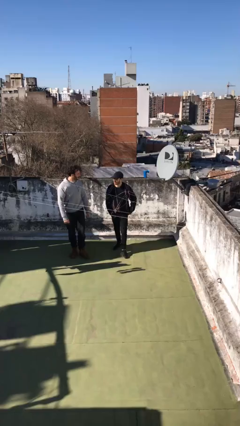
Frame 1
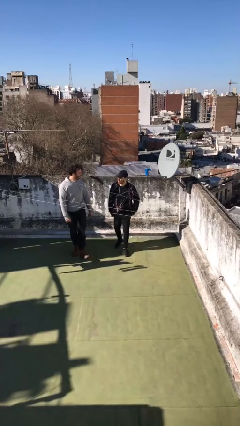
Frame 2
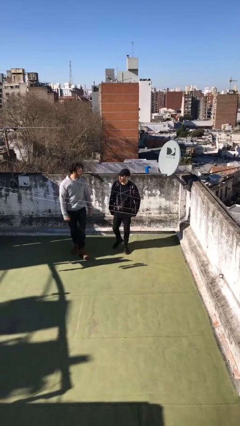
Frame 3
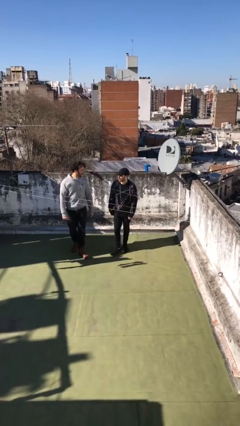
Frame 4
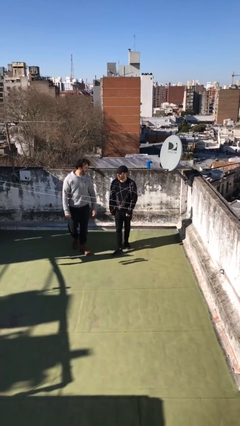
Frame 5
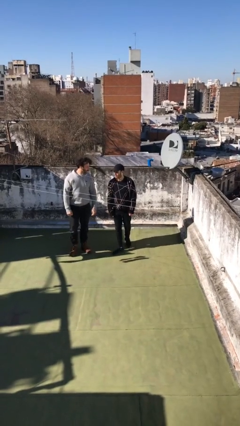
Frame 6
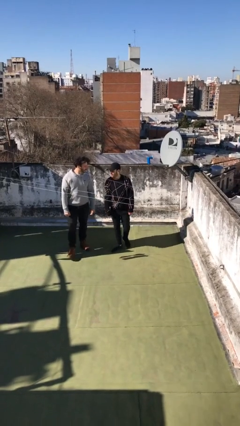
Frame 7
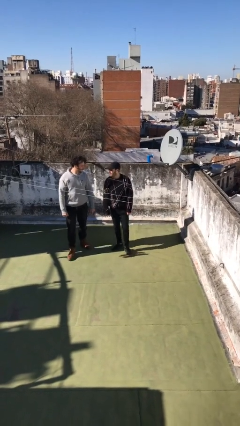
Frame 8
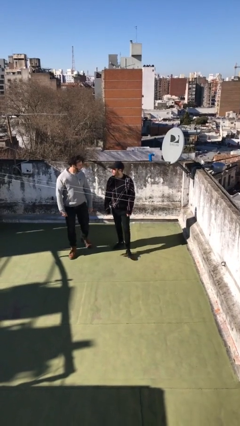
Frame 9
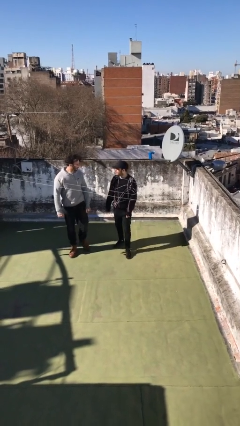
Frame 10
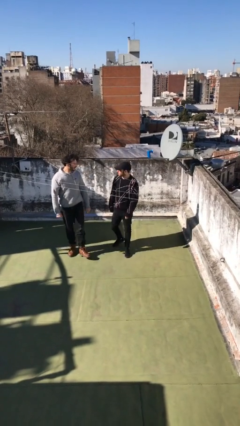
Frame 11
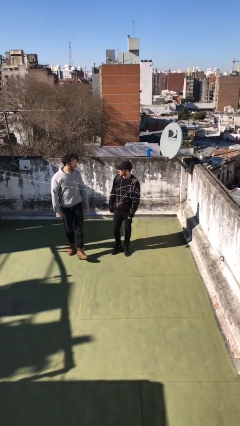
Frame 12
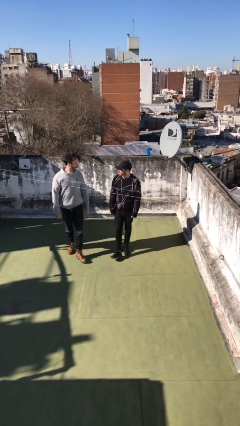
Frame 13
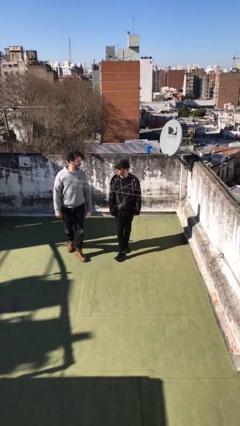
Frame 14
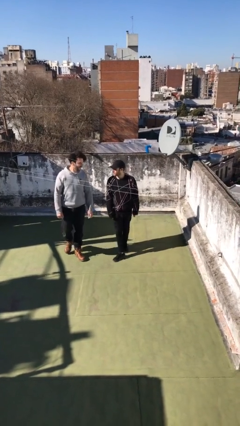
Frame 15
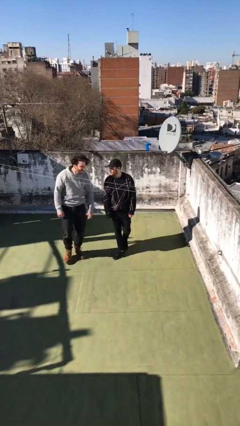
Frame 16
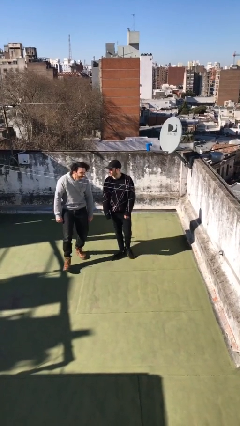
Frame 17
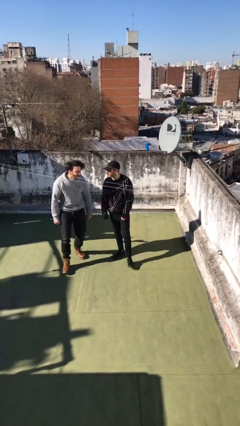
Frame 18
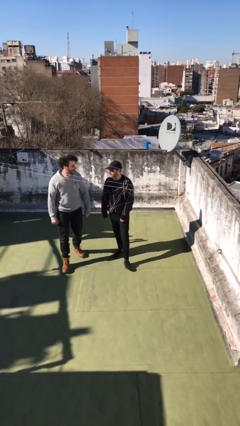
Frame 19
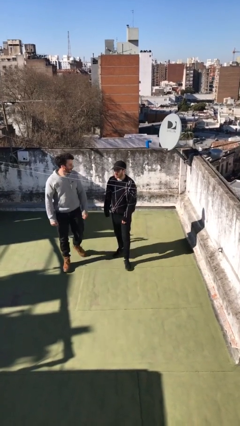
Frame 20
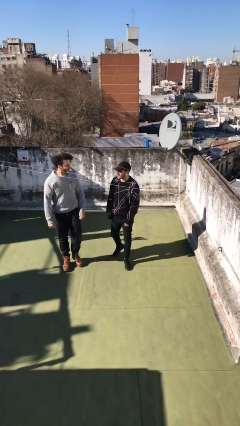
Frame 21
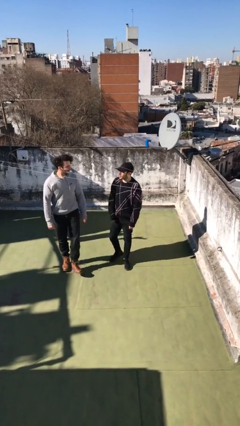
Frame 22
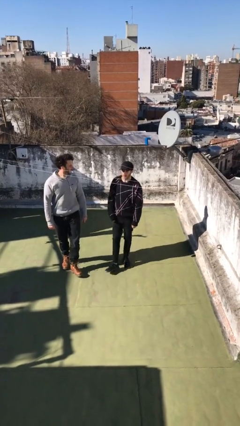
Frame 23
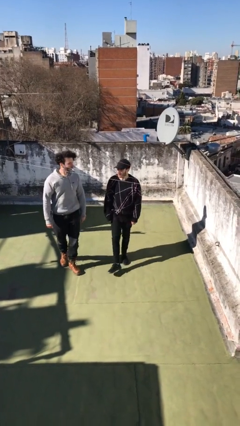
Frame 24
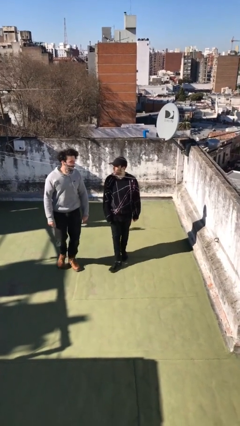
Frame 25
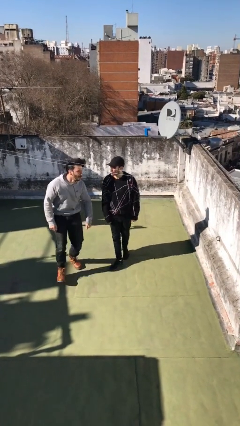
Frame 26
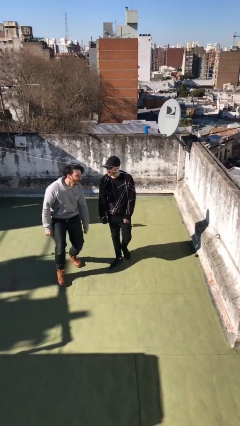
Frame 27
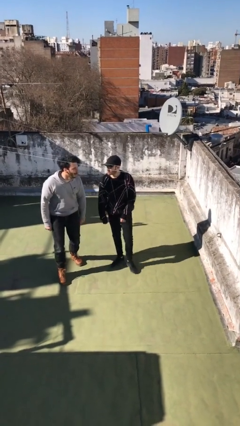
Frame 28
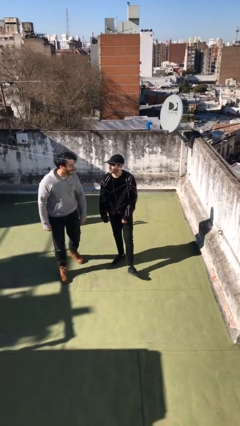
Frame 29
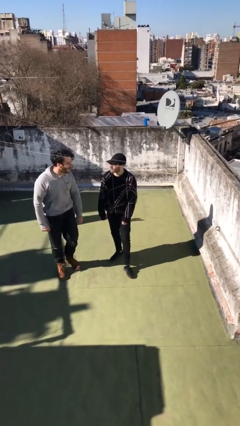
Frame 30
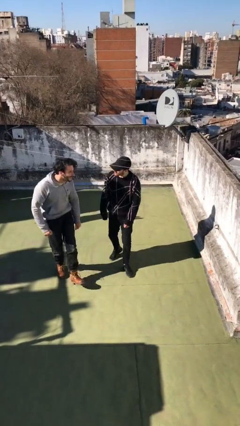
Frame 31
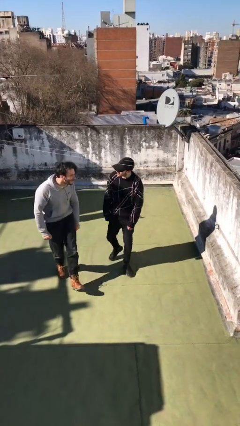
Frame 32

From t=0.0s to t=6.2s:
person talks to person

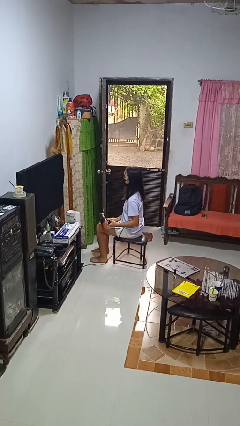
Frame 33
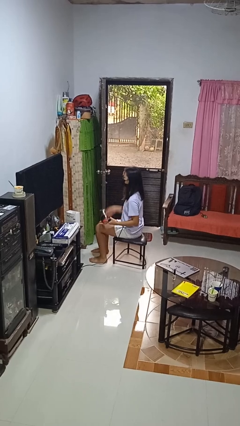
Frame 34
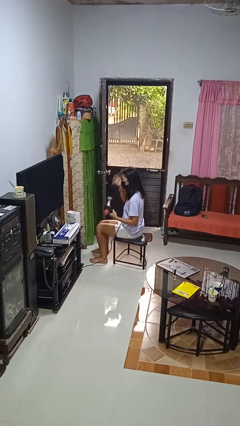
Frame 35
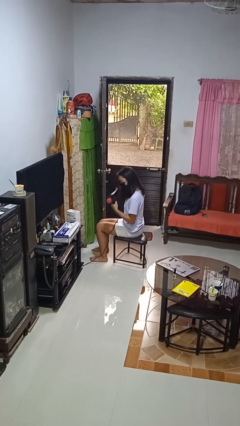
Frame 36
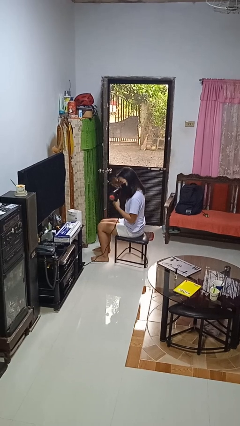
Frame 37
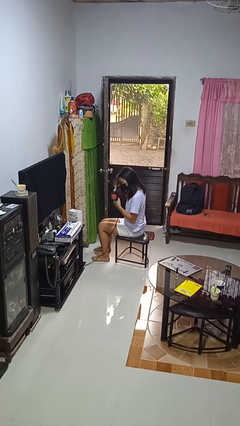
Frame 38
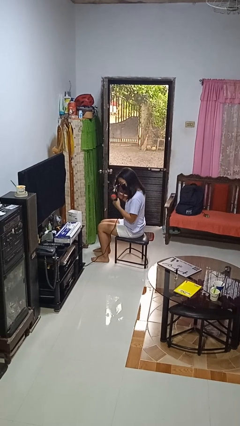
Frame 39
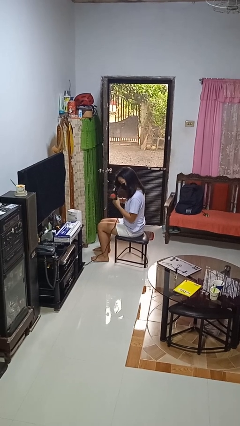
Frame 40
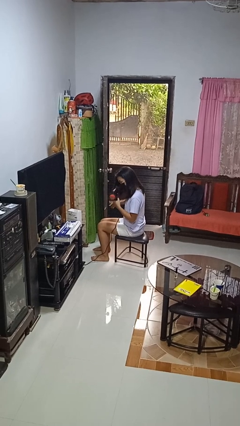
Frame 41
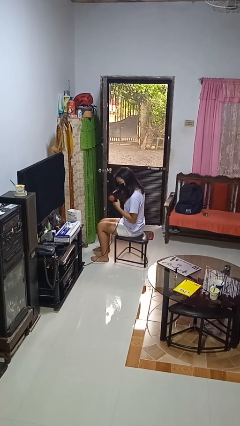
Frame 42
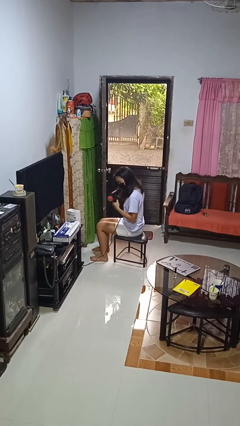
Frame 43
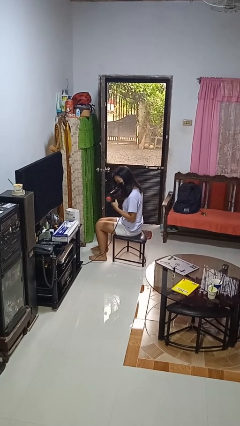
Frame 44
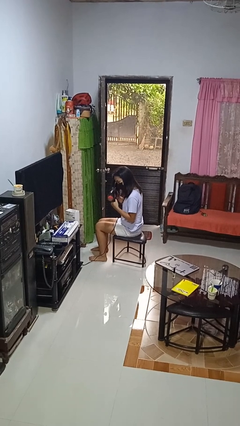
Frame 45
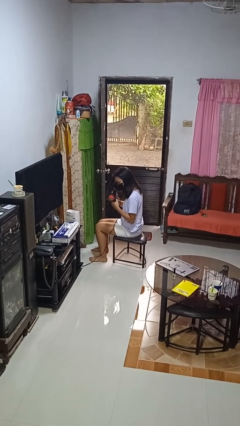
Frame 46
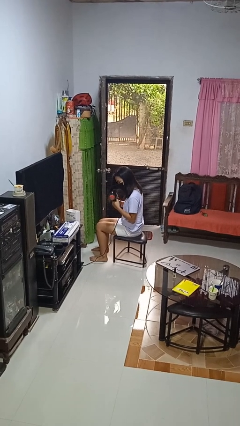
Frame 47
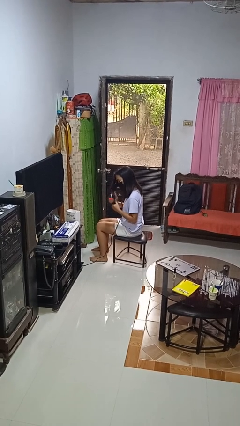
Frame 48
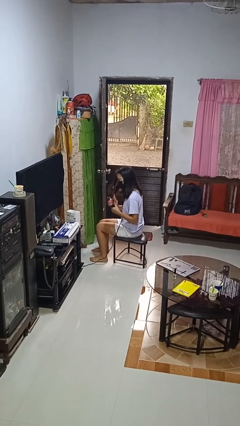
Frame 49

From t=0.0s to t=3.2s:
person dries hair with hairdryer

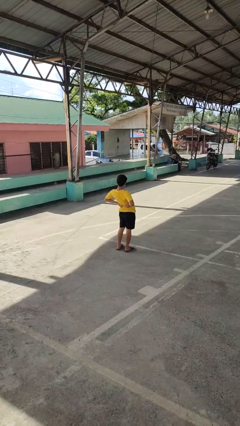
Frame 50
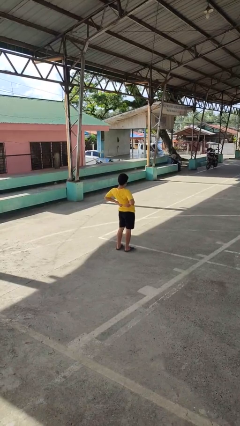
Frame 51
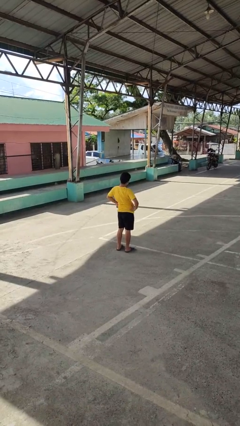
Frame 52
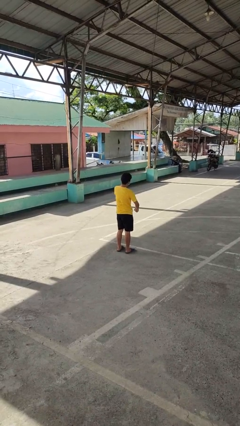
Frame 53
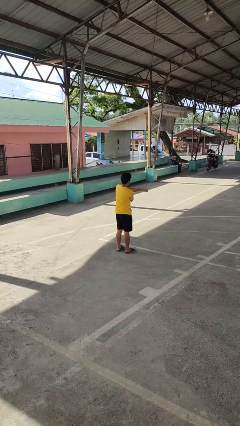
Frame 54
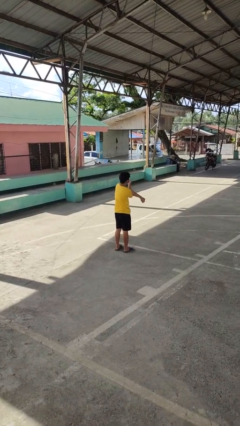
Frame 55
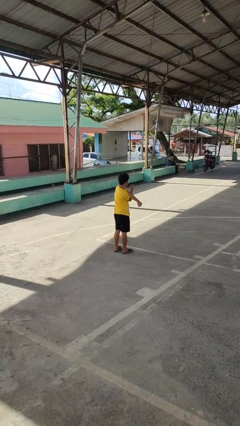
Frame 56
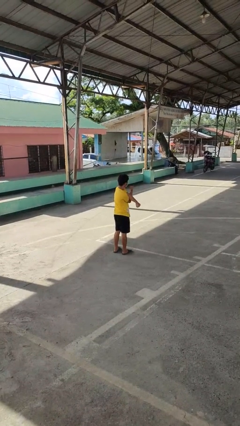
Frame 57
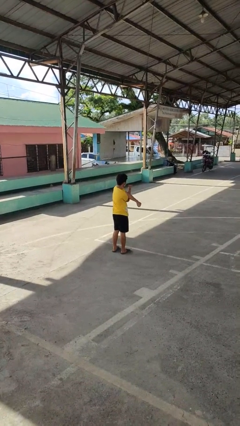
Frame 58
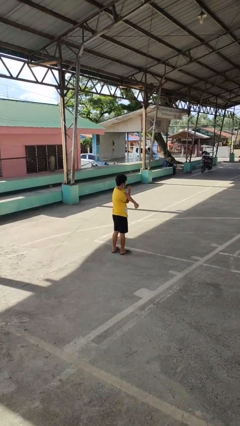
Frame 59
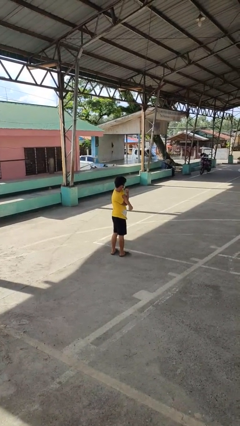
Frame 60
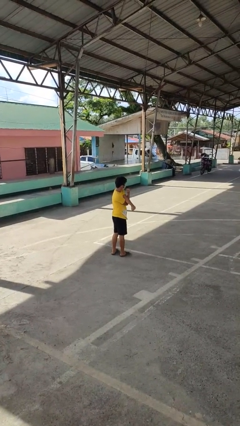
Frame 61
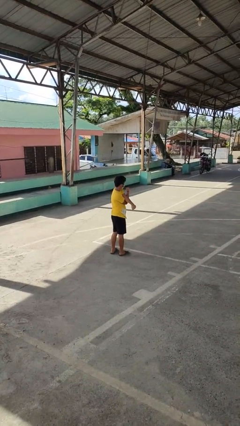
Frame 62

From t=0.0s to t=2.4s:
person stretches arms to side

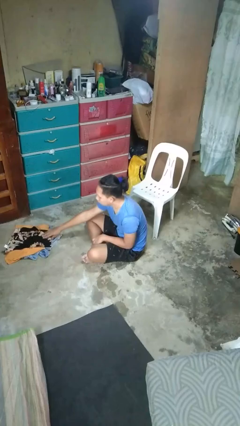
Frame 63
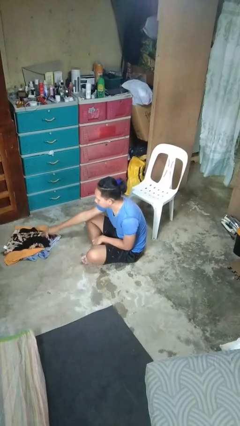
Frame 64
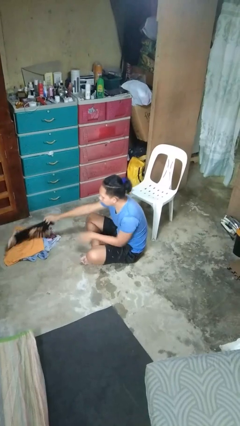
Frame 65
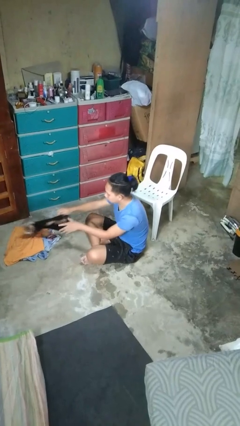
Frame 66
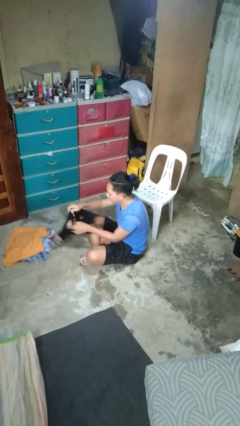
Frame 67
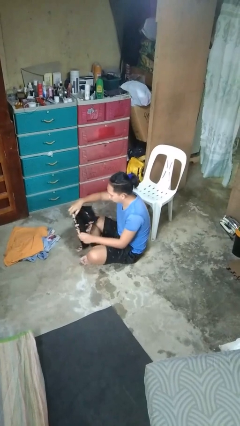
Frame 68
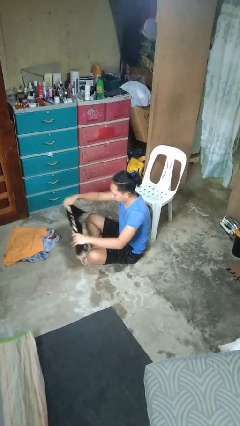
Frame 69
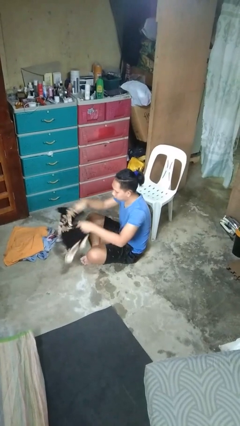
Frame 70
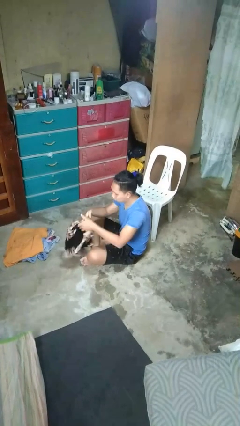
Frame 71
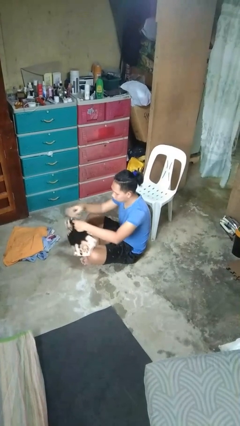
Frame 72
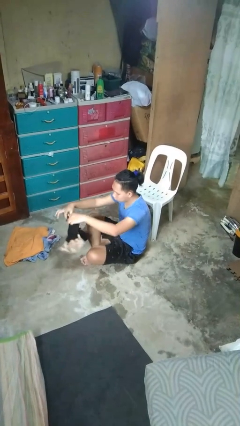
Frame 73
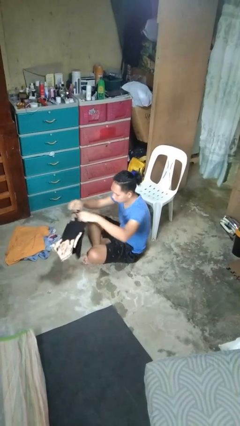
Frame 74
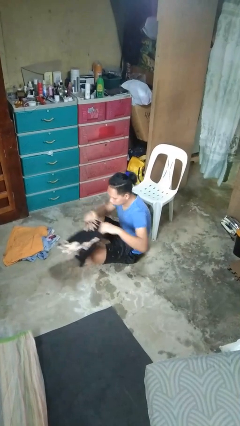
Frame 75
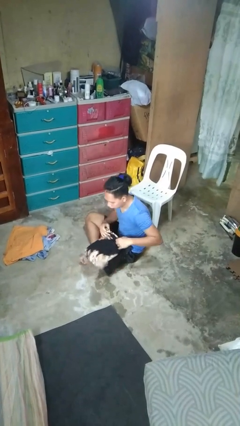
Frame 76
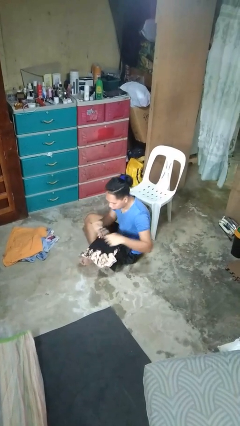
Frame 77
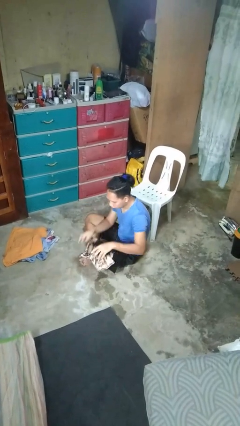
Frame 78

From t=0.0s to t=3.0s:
person folds shirt

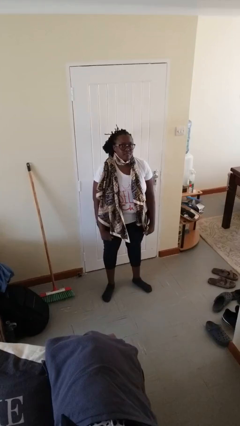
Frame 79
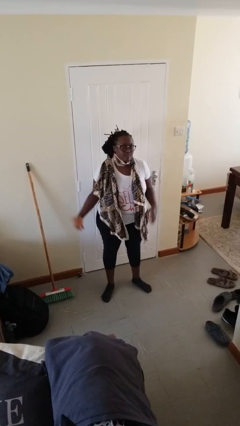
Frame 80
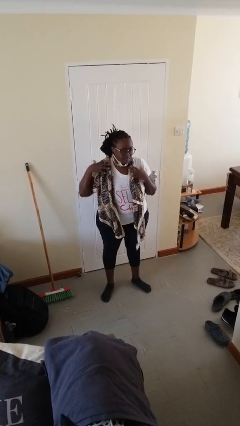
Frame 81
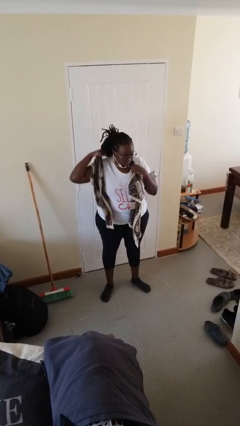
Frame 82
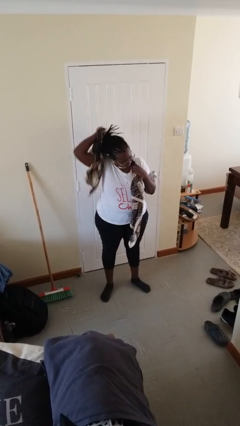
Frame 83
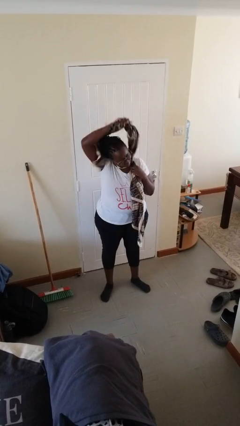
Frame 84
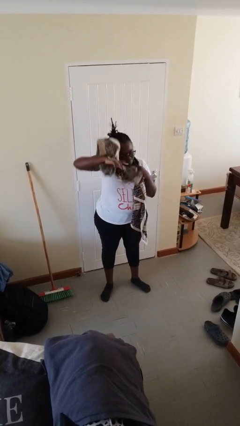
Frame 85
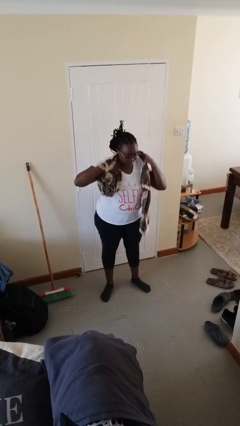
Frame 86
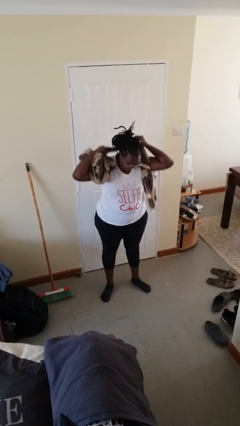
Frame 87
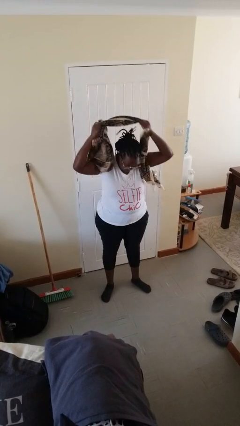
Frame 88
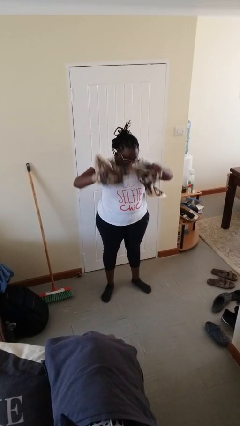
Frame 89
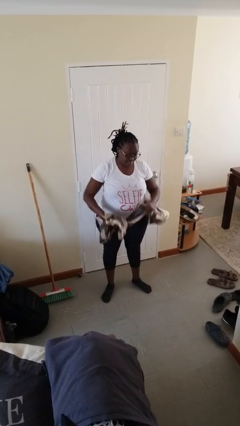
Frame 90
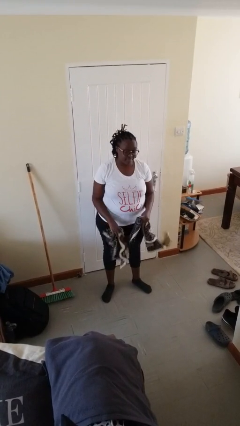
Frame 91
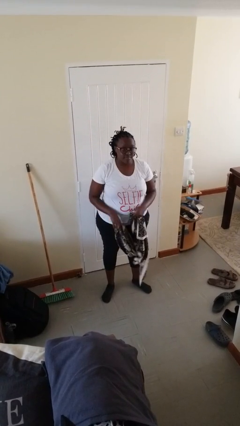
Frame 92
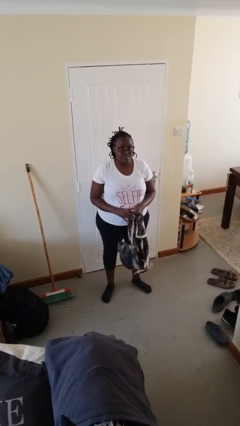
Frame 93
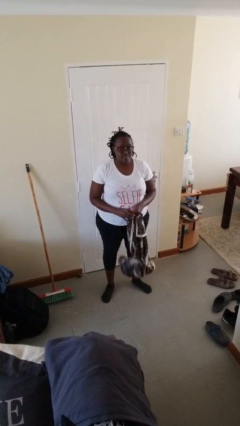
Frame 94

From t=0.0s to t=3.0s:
person takes off scarf
